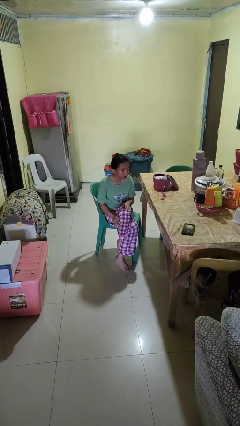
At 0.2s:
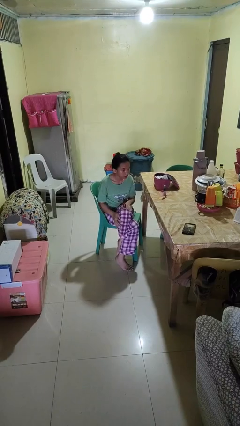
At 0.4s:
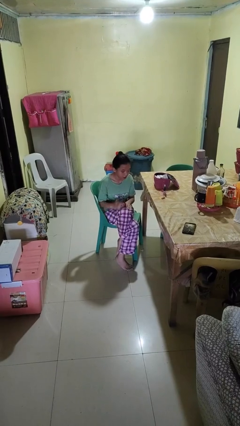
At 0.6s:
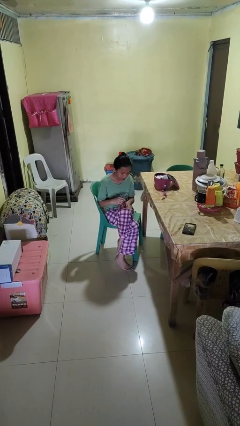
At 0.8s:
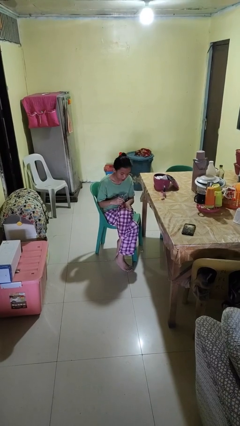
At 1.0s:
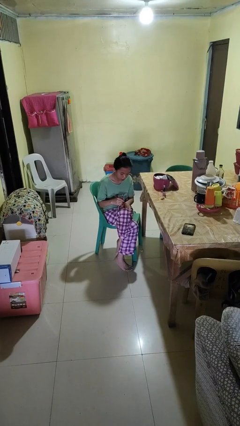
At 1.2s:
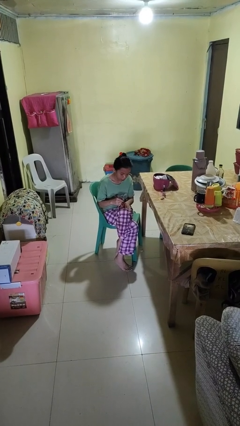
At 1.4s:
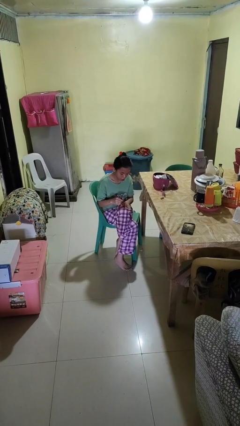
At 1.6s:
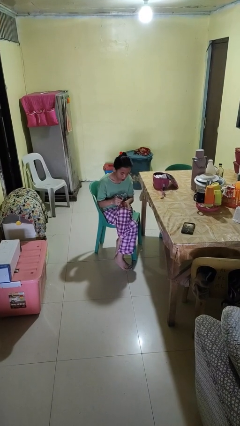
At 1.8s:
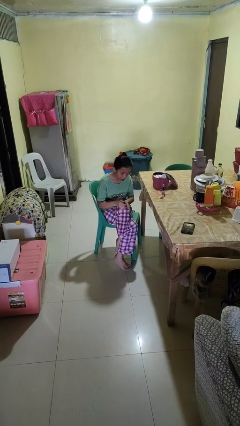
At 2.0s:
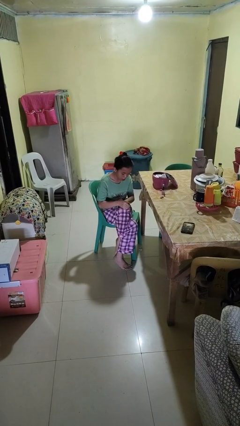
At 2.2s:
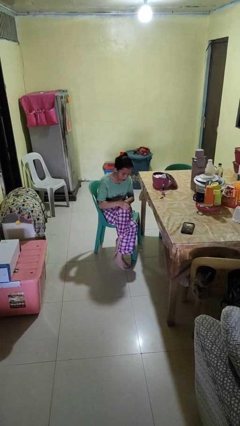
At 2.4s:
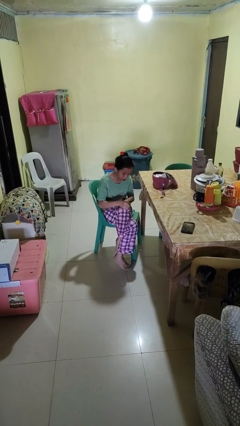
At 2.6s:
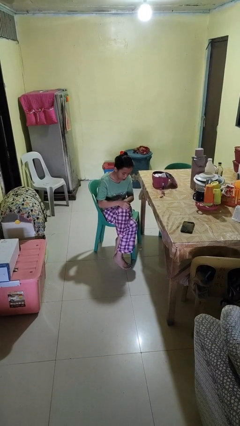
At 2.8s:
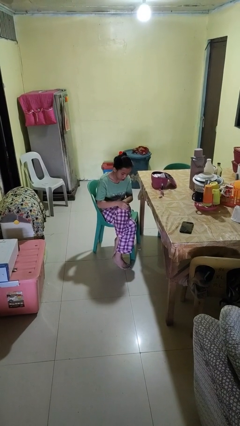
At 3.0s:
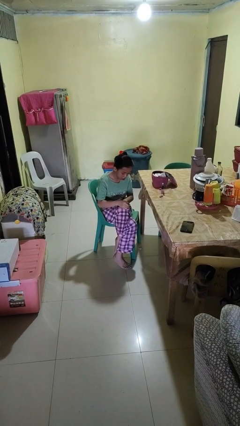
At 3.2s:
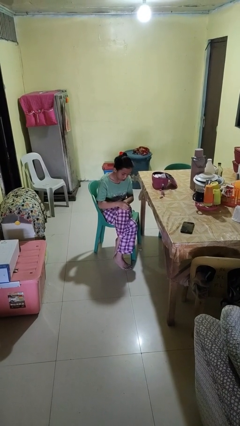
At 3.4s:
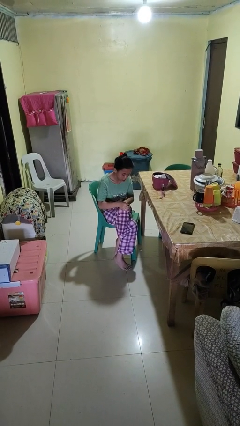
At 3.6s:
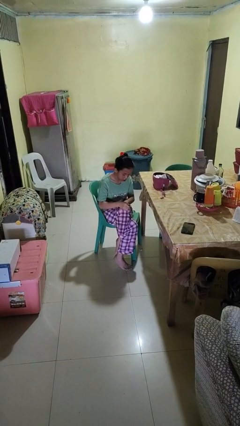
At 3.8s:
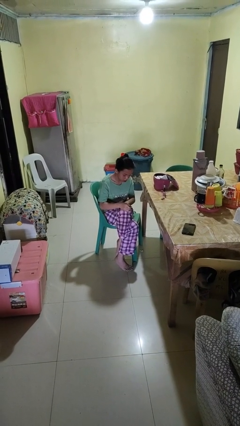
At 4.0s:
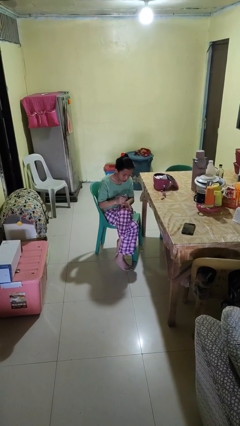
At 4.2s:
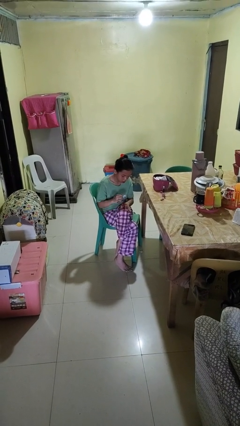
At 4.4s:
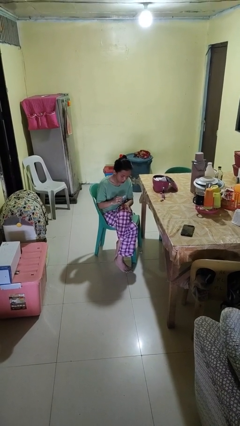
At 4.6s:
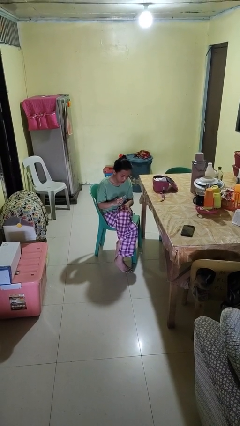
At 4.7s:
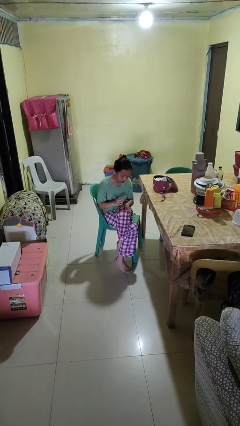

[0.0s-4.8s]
person paints fingernails

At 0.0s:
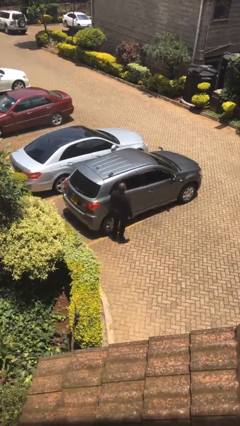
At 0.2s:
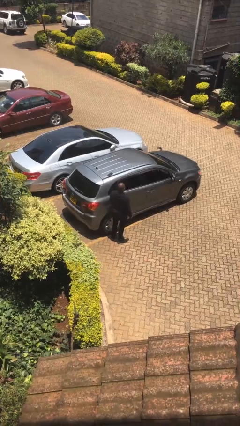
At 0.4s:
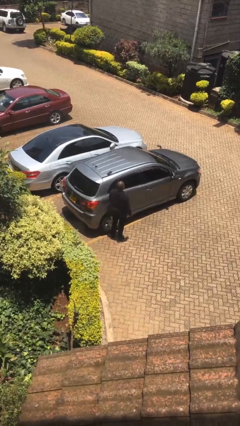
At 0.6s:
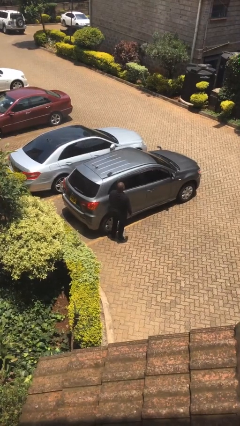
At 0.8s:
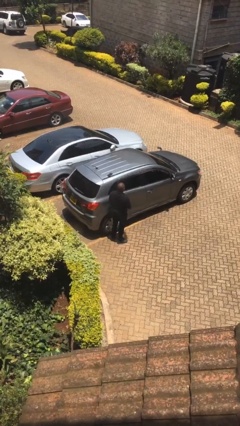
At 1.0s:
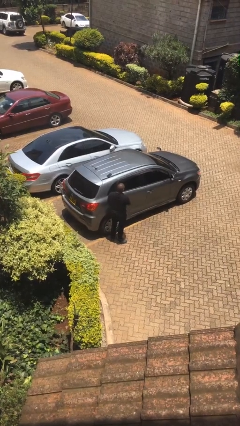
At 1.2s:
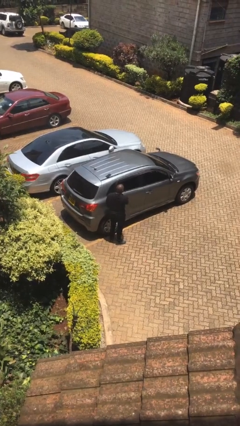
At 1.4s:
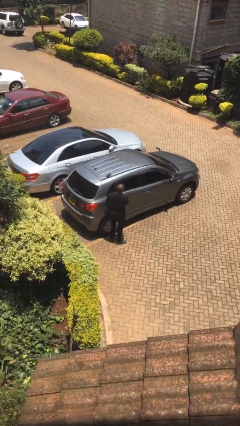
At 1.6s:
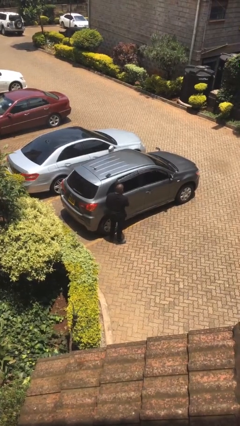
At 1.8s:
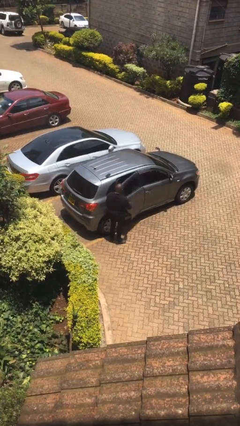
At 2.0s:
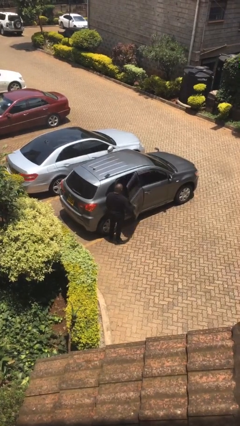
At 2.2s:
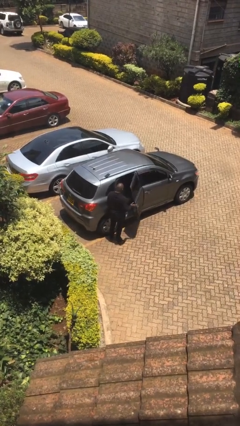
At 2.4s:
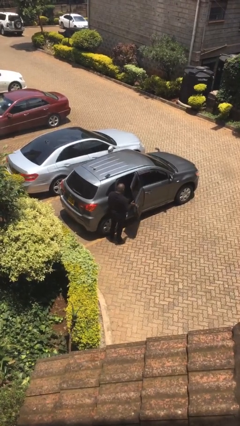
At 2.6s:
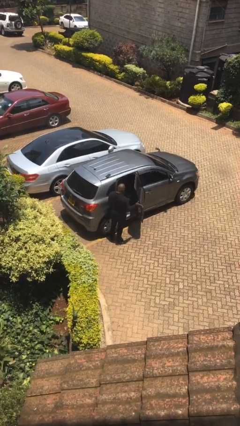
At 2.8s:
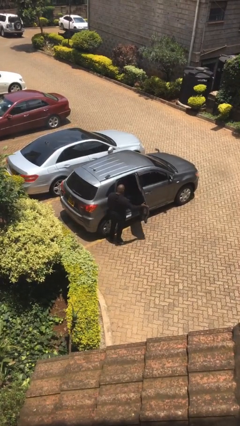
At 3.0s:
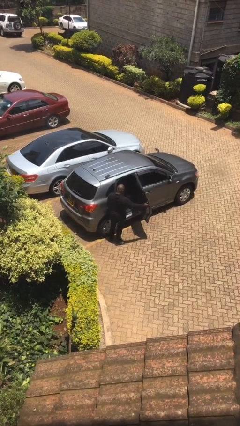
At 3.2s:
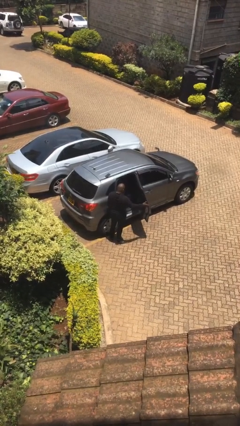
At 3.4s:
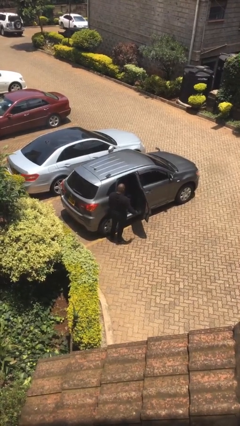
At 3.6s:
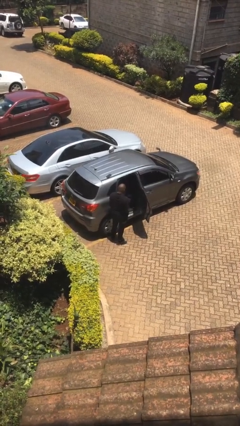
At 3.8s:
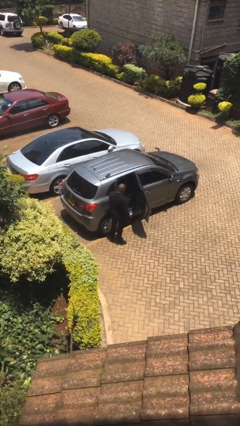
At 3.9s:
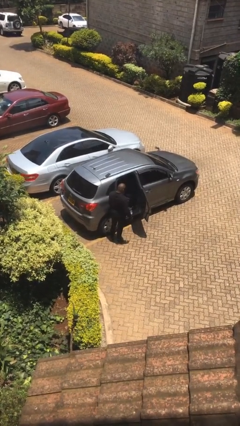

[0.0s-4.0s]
person opens car door

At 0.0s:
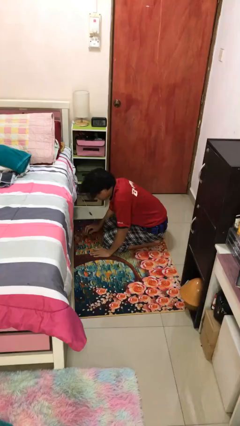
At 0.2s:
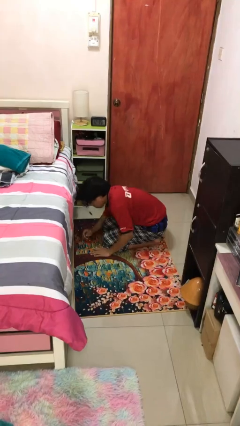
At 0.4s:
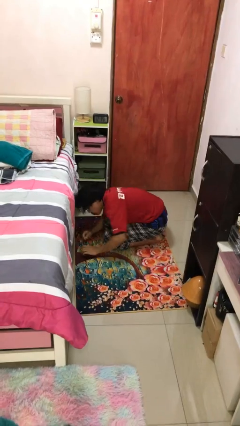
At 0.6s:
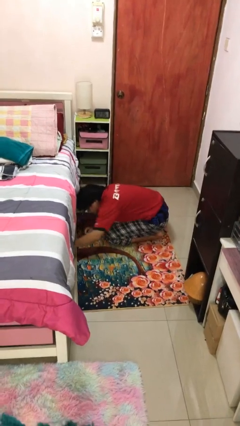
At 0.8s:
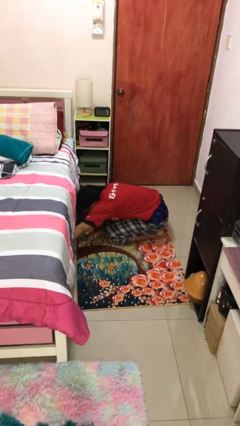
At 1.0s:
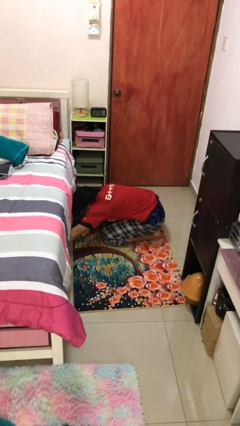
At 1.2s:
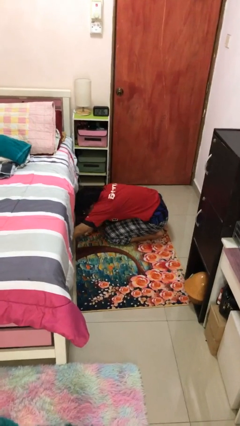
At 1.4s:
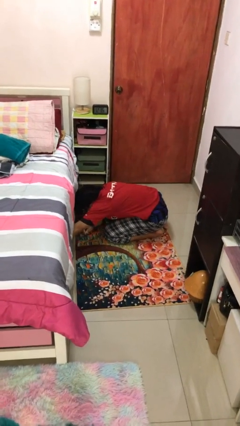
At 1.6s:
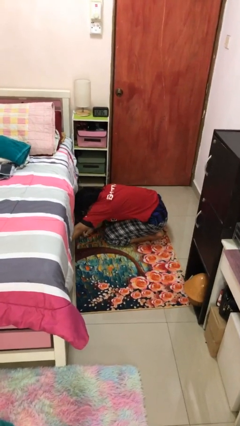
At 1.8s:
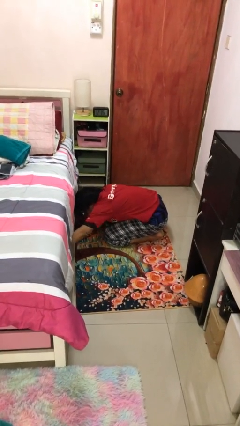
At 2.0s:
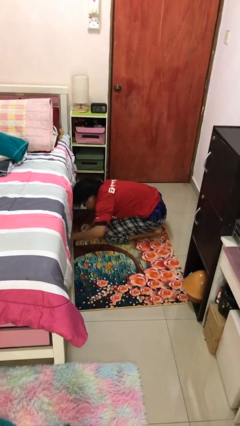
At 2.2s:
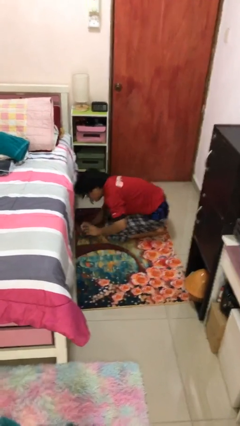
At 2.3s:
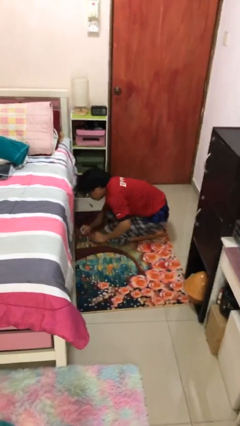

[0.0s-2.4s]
person searches under bed

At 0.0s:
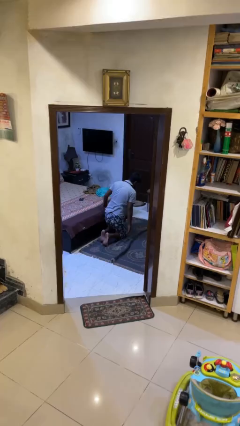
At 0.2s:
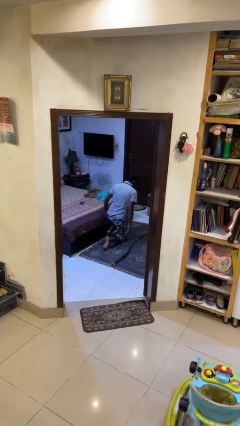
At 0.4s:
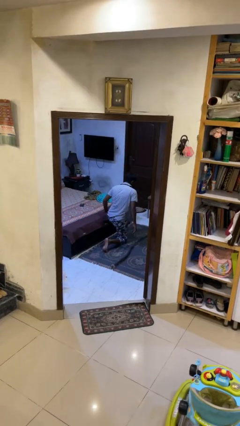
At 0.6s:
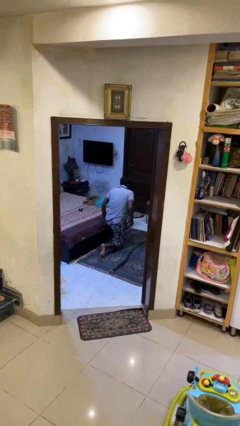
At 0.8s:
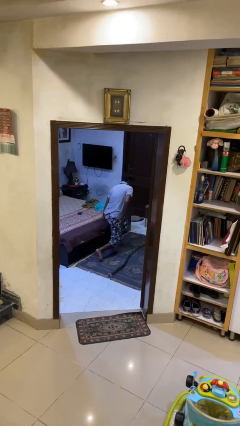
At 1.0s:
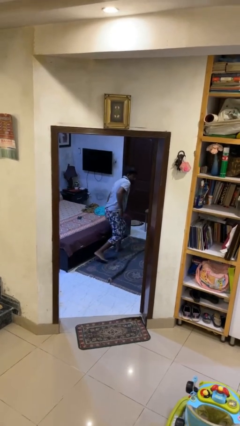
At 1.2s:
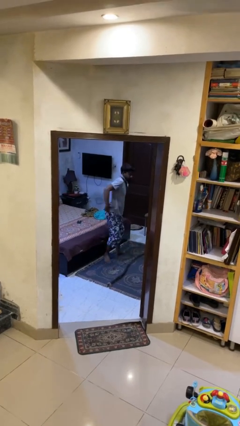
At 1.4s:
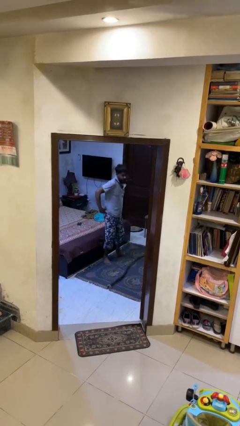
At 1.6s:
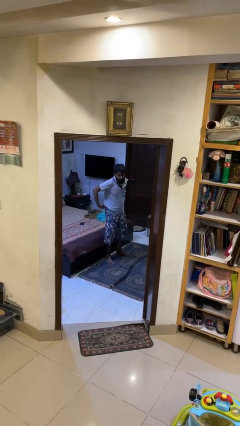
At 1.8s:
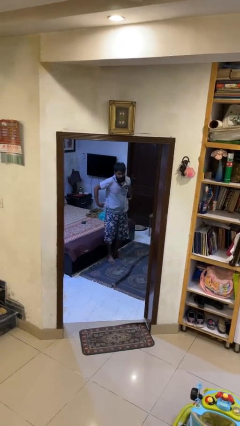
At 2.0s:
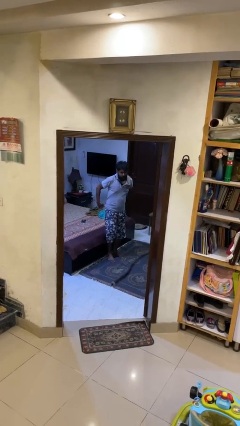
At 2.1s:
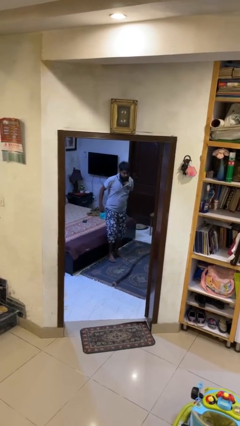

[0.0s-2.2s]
person stands up from floor

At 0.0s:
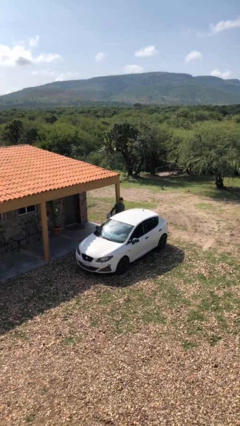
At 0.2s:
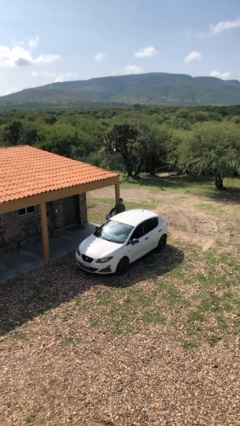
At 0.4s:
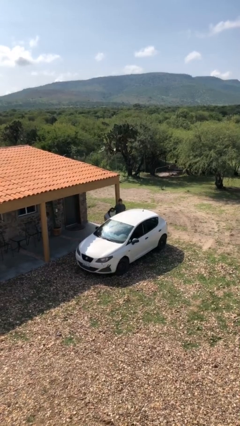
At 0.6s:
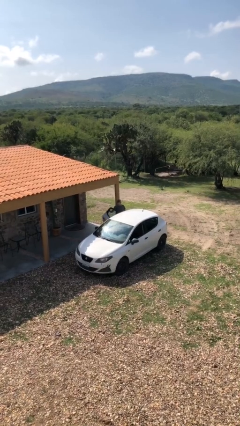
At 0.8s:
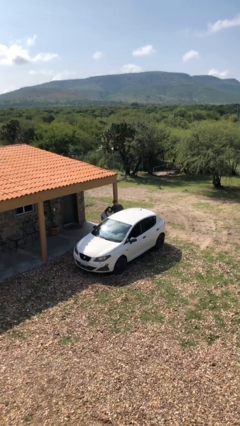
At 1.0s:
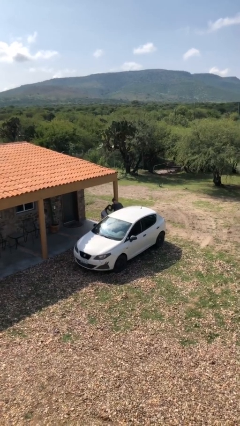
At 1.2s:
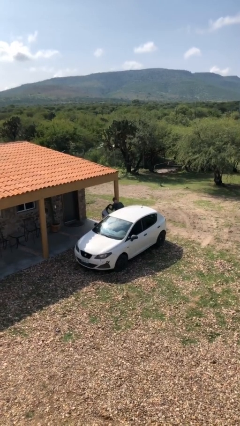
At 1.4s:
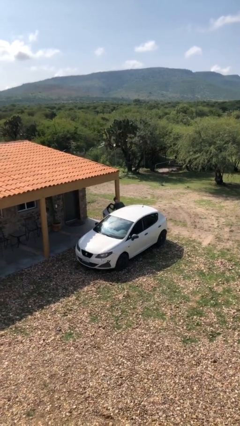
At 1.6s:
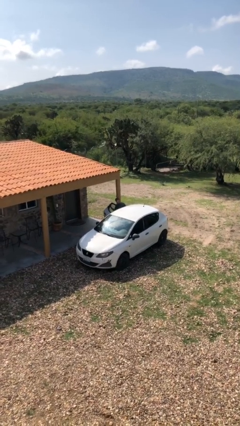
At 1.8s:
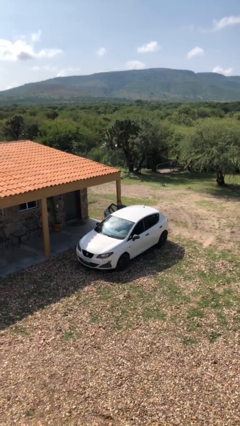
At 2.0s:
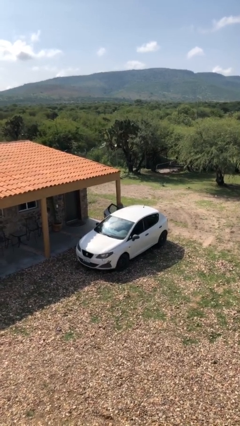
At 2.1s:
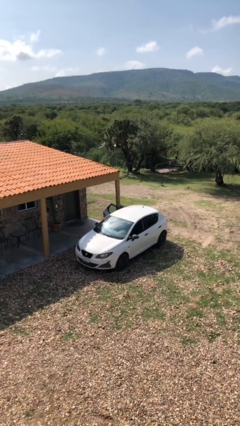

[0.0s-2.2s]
person enters car

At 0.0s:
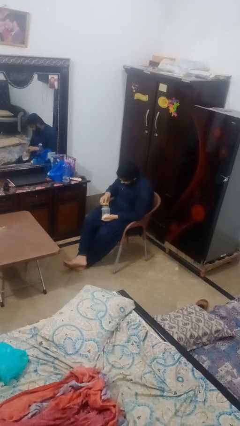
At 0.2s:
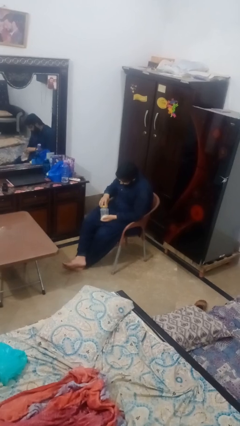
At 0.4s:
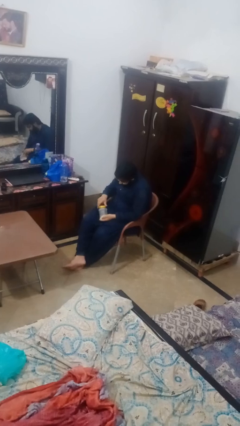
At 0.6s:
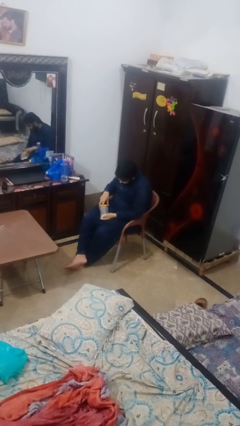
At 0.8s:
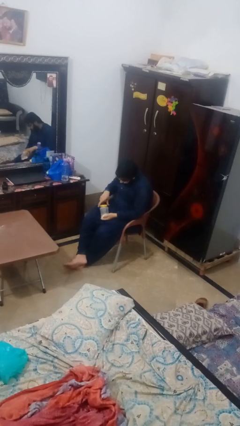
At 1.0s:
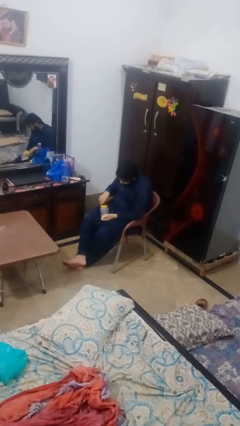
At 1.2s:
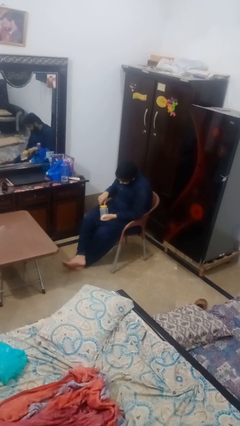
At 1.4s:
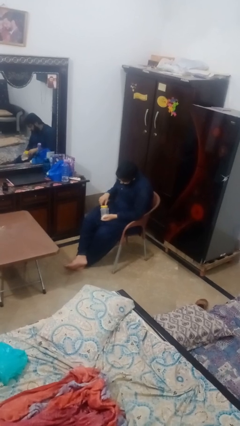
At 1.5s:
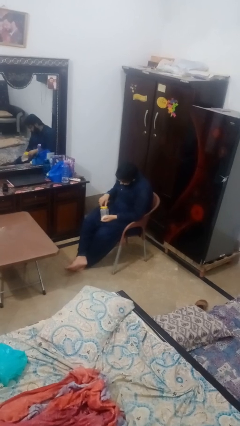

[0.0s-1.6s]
person closes jar

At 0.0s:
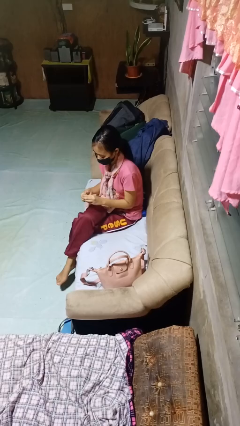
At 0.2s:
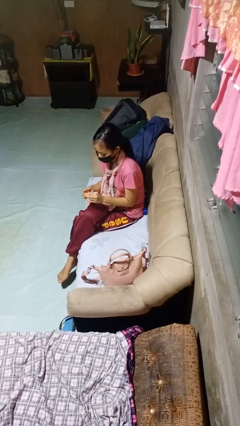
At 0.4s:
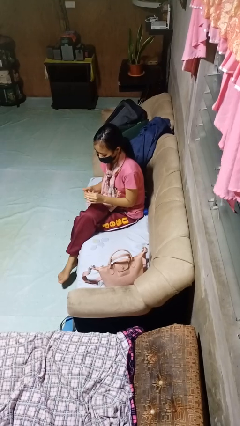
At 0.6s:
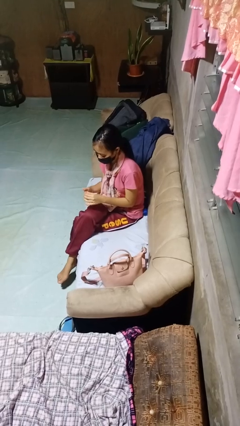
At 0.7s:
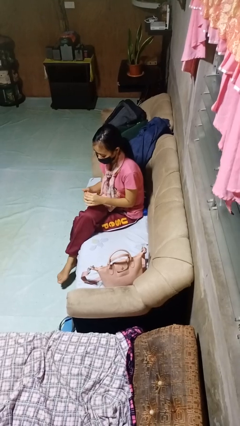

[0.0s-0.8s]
person puts on ring
